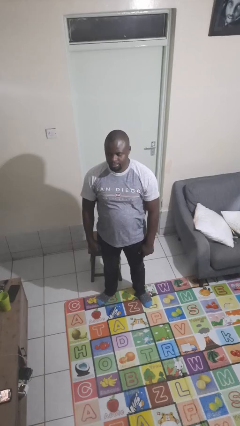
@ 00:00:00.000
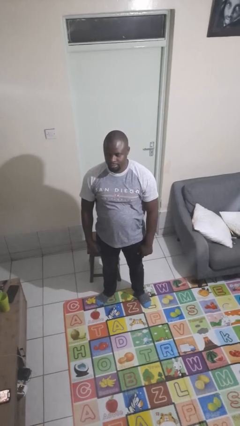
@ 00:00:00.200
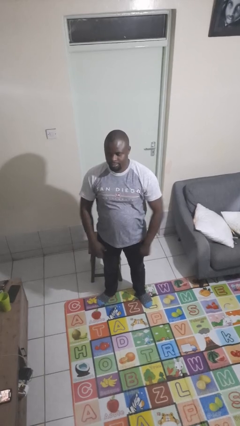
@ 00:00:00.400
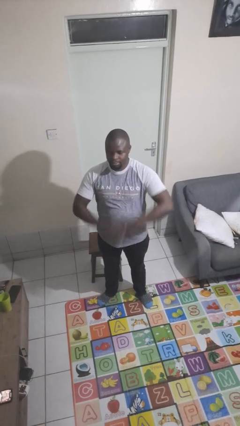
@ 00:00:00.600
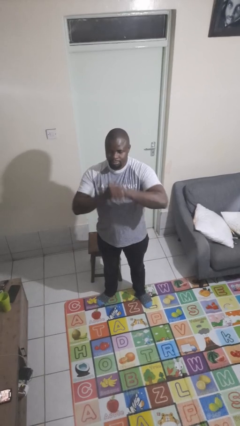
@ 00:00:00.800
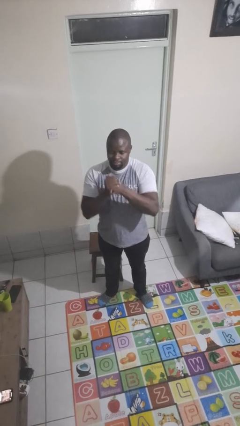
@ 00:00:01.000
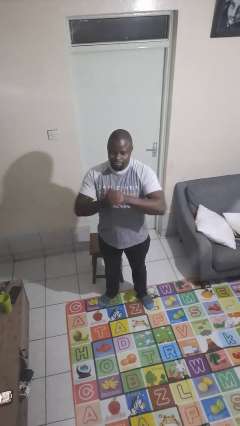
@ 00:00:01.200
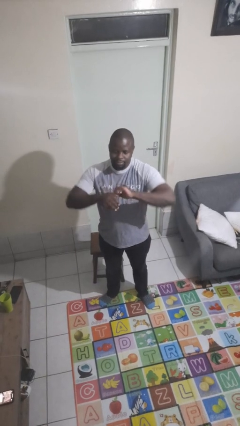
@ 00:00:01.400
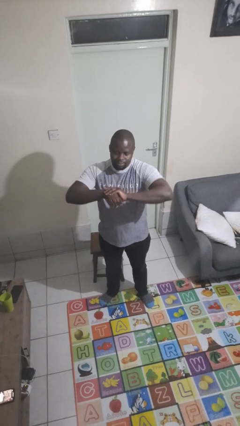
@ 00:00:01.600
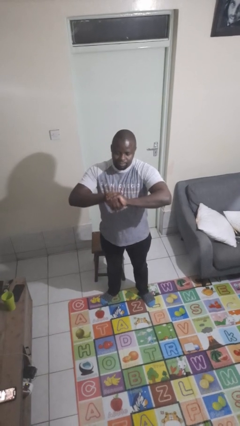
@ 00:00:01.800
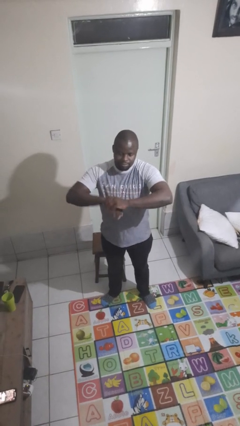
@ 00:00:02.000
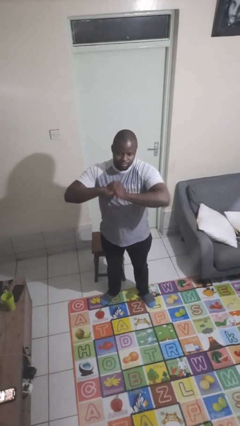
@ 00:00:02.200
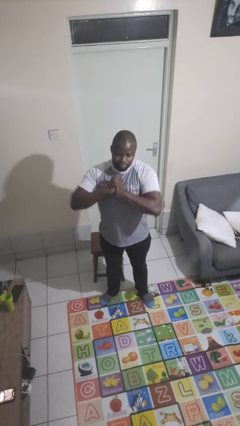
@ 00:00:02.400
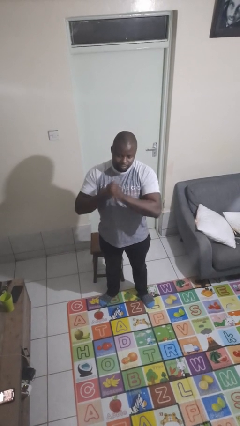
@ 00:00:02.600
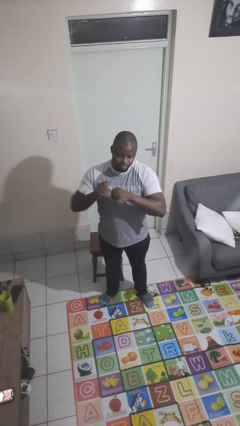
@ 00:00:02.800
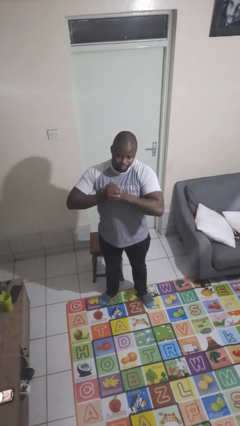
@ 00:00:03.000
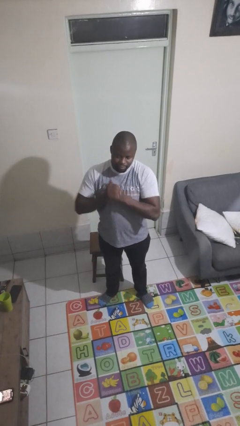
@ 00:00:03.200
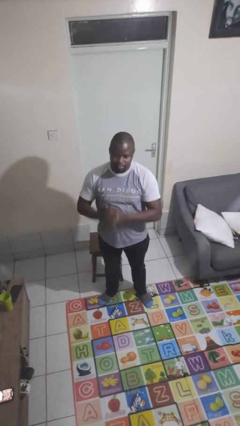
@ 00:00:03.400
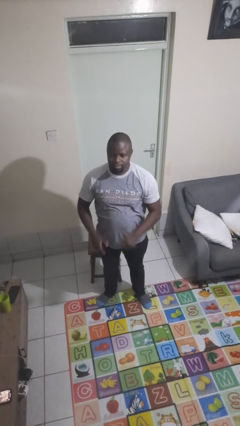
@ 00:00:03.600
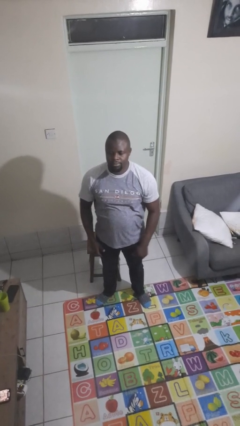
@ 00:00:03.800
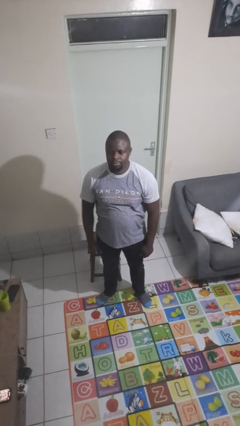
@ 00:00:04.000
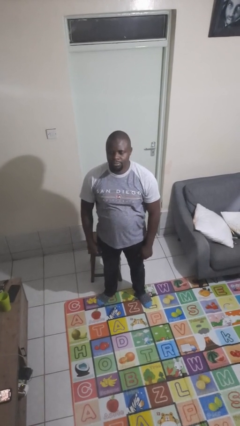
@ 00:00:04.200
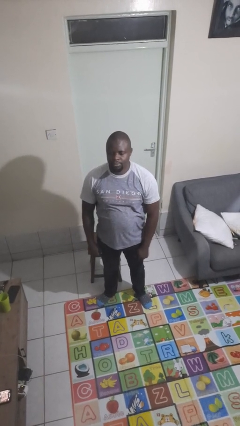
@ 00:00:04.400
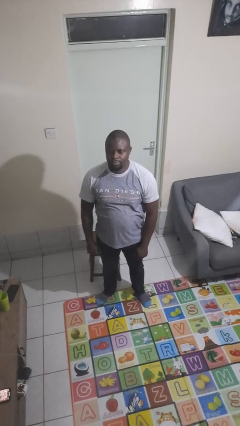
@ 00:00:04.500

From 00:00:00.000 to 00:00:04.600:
person cracks knuckles

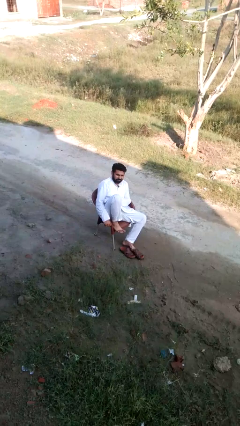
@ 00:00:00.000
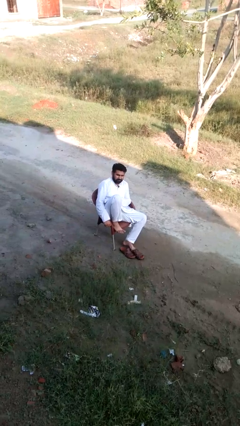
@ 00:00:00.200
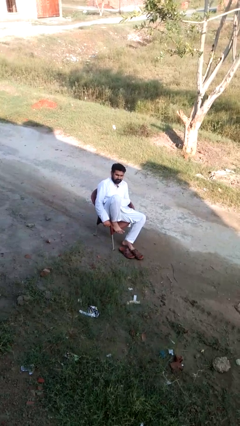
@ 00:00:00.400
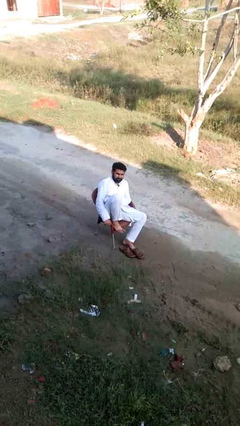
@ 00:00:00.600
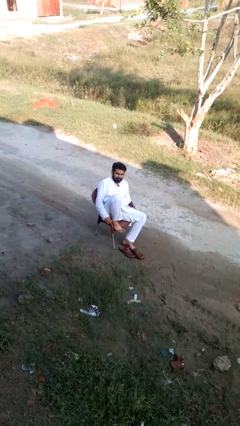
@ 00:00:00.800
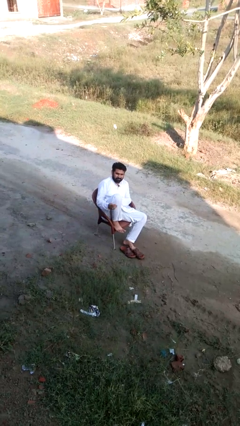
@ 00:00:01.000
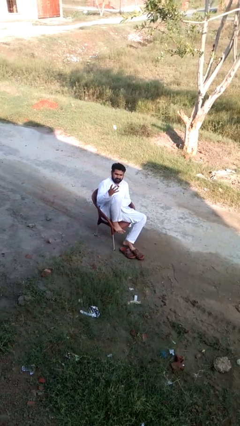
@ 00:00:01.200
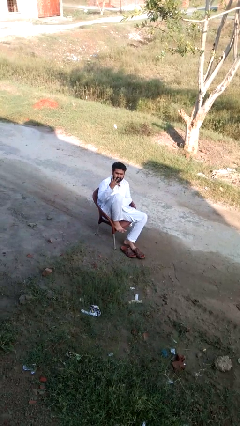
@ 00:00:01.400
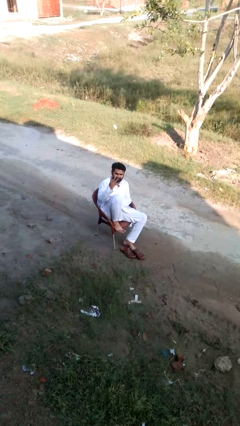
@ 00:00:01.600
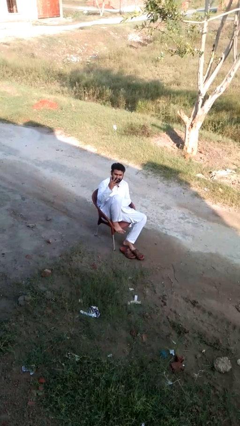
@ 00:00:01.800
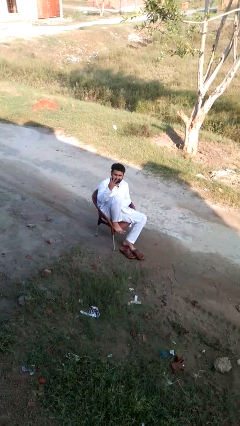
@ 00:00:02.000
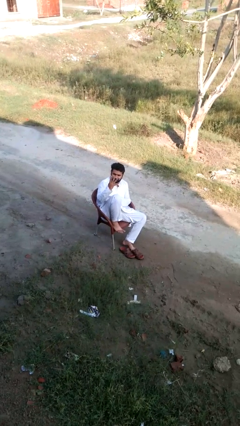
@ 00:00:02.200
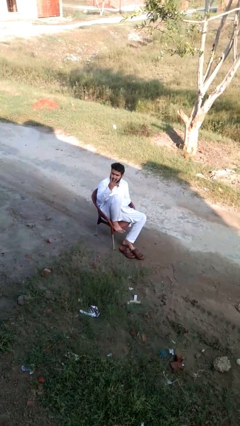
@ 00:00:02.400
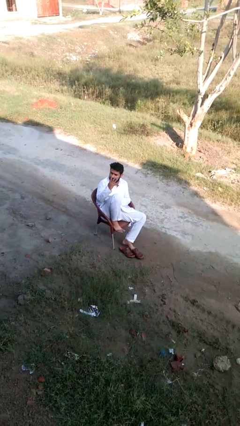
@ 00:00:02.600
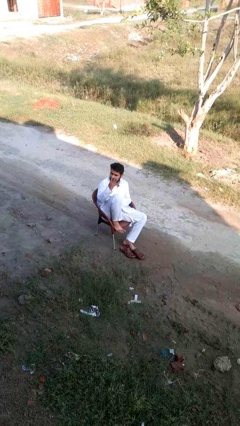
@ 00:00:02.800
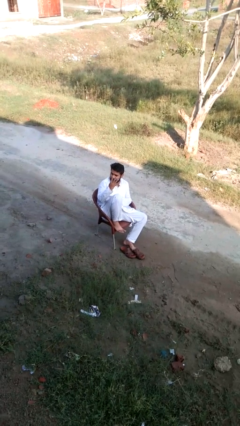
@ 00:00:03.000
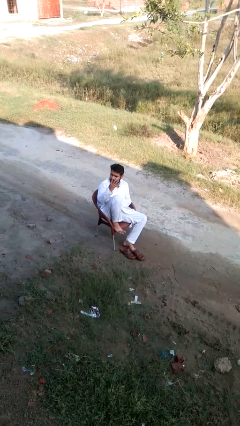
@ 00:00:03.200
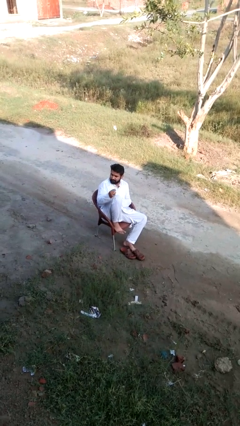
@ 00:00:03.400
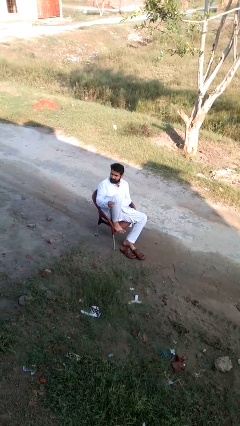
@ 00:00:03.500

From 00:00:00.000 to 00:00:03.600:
person gestures number four

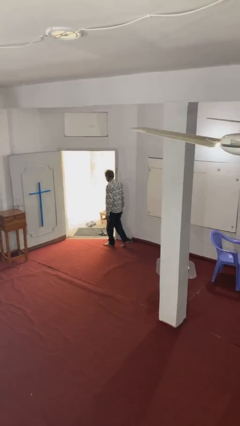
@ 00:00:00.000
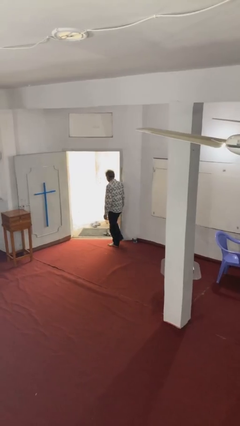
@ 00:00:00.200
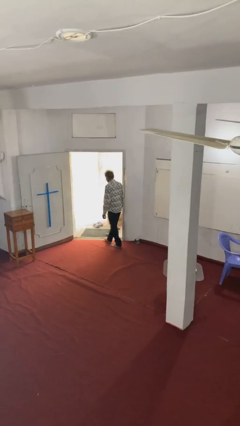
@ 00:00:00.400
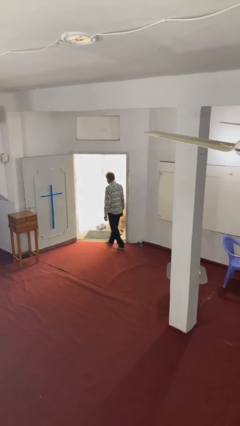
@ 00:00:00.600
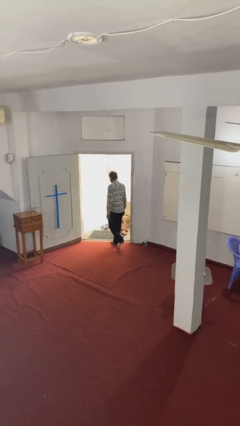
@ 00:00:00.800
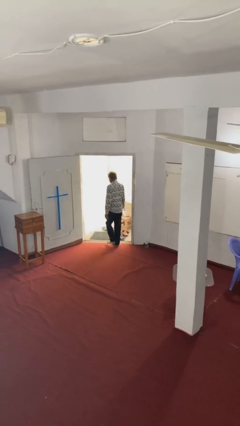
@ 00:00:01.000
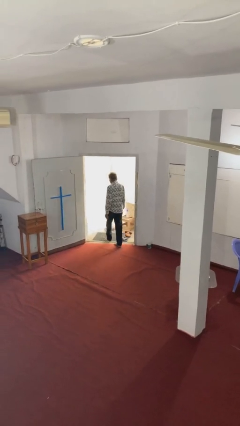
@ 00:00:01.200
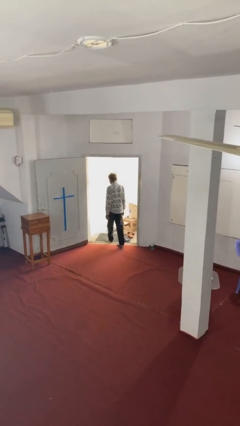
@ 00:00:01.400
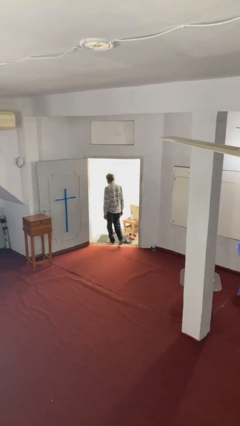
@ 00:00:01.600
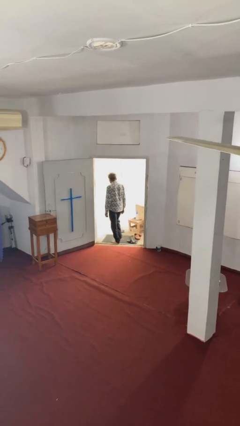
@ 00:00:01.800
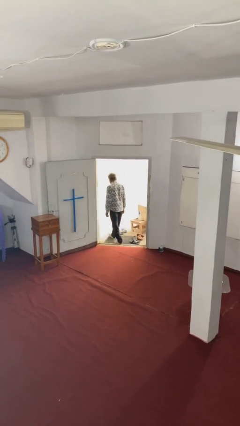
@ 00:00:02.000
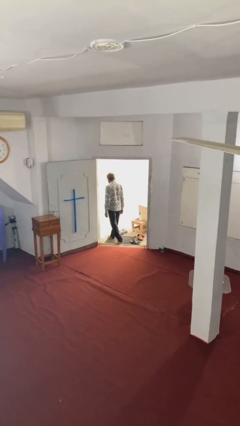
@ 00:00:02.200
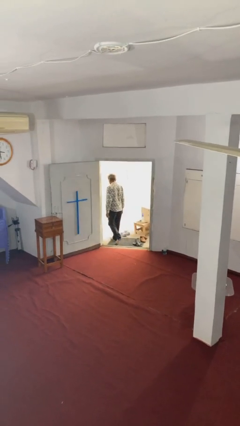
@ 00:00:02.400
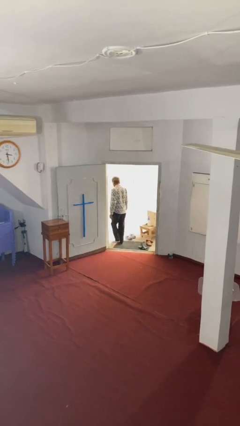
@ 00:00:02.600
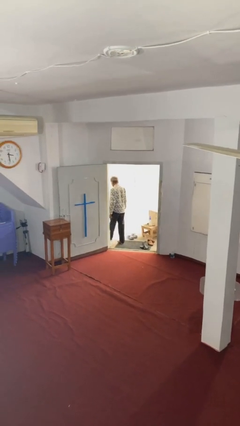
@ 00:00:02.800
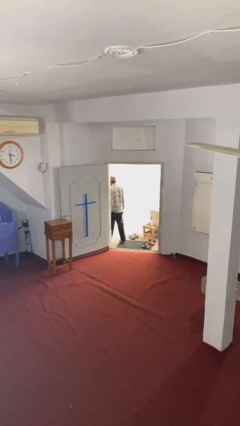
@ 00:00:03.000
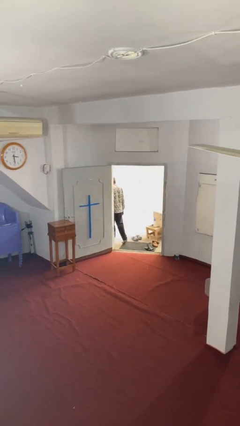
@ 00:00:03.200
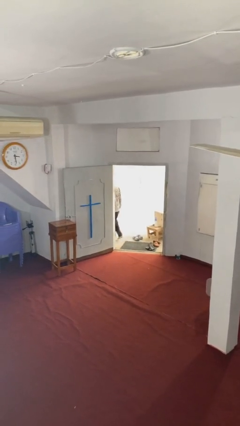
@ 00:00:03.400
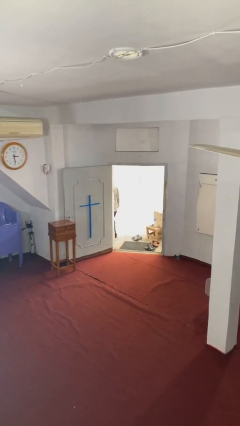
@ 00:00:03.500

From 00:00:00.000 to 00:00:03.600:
person exits scene through structure

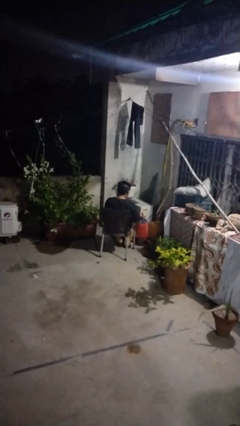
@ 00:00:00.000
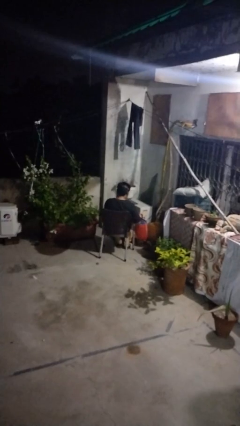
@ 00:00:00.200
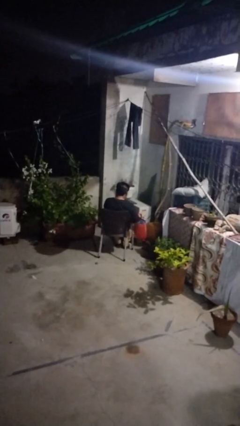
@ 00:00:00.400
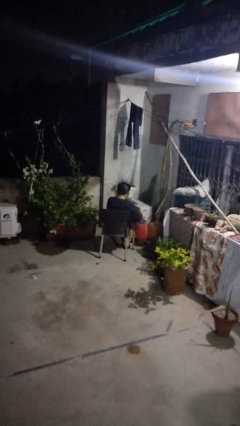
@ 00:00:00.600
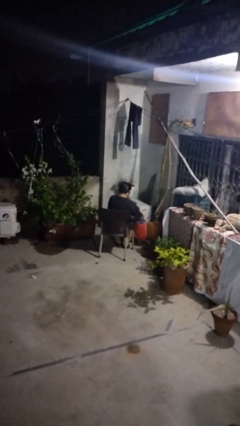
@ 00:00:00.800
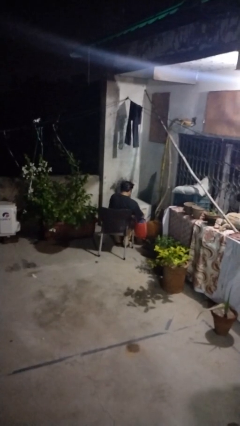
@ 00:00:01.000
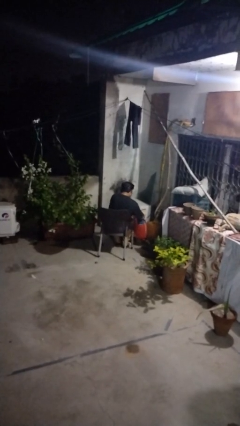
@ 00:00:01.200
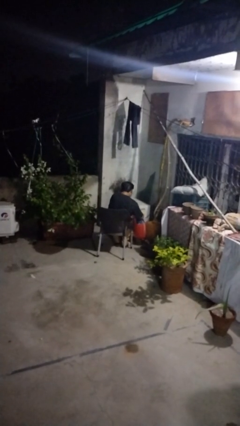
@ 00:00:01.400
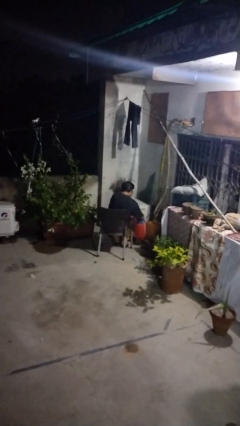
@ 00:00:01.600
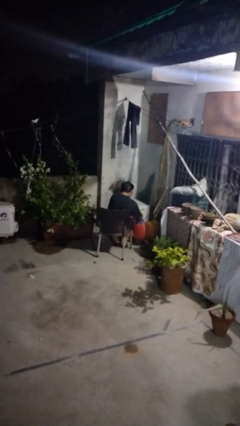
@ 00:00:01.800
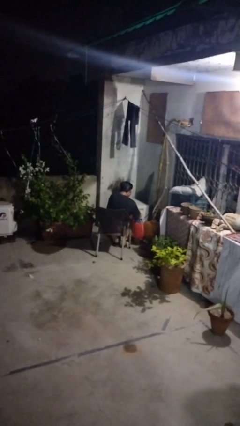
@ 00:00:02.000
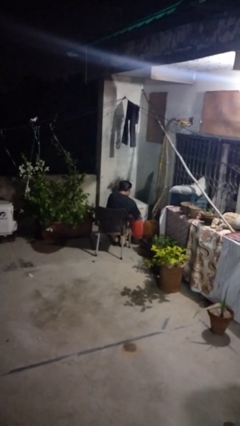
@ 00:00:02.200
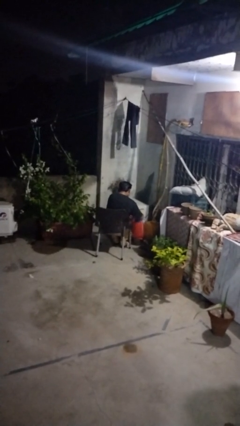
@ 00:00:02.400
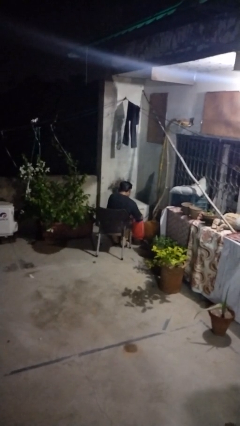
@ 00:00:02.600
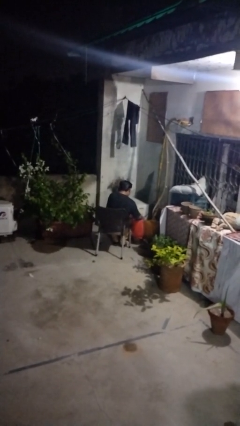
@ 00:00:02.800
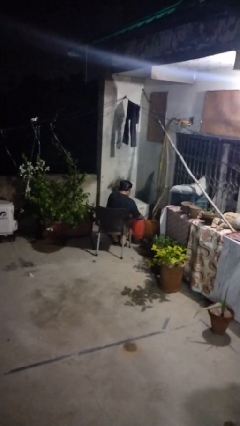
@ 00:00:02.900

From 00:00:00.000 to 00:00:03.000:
person searches in bag

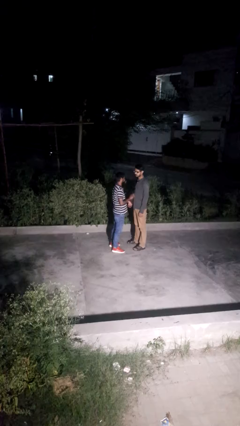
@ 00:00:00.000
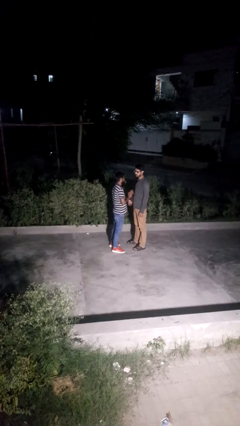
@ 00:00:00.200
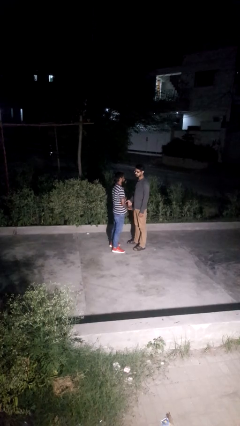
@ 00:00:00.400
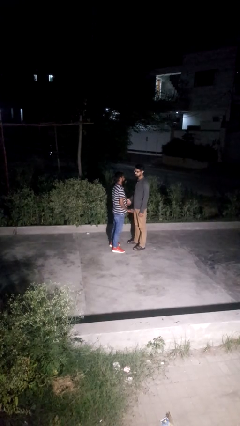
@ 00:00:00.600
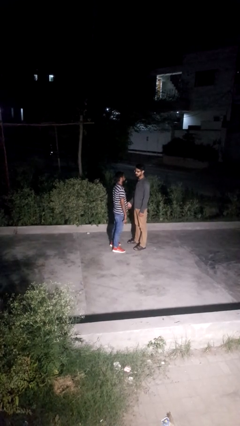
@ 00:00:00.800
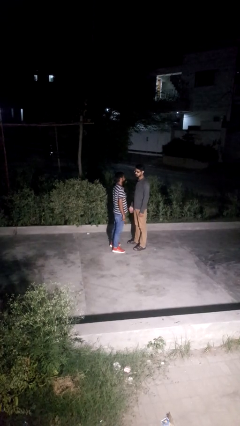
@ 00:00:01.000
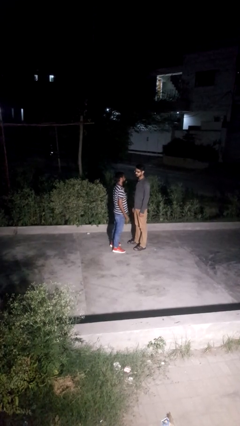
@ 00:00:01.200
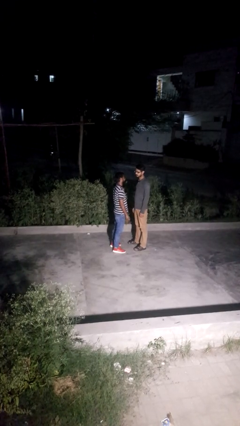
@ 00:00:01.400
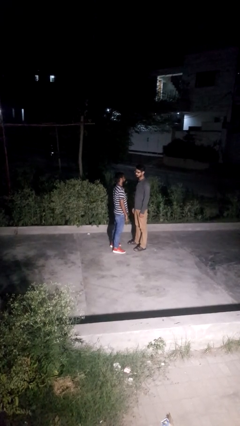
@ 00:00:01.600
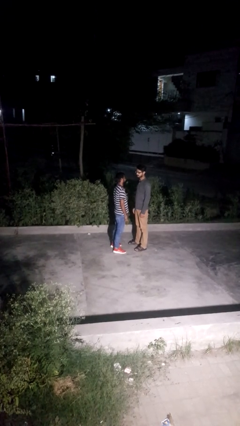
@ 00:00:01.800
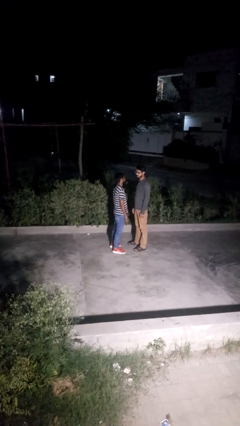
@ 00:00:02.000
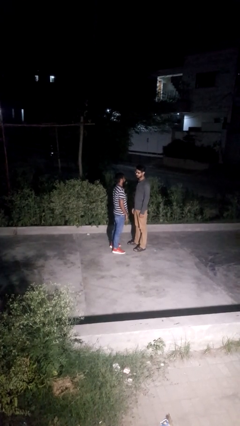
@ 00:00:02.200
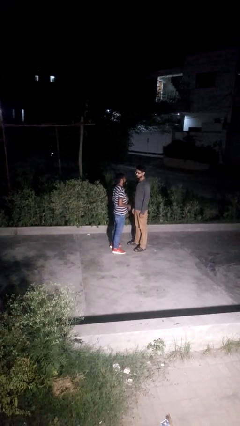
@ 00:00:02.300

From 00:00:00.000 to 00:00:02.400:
person highfives hand
